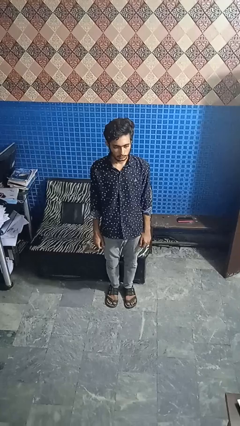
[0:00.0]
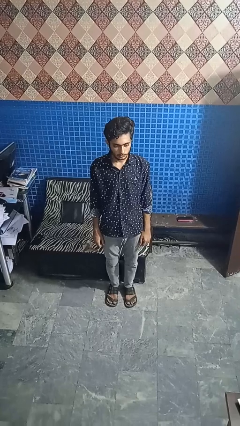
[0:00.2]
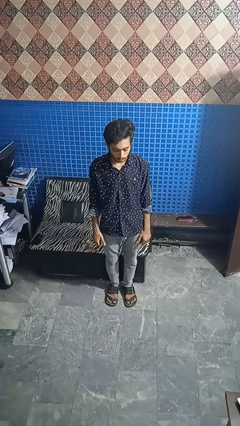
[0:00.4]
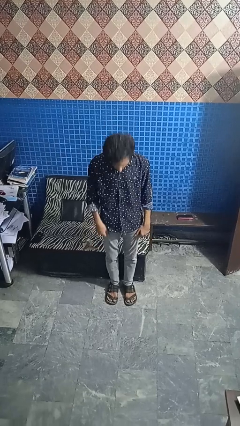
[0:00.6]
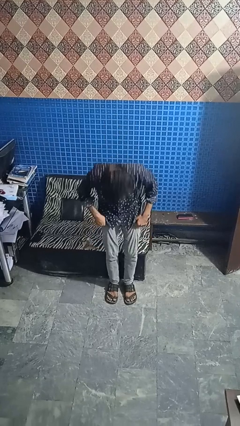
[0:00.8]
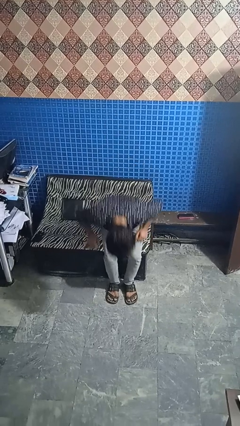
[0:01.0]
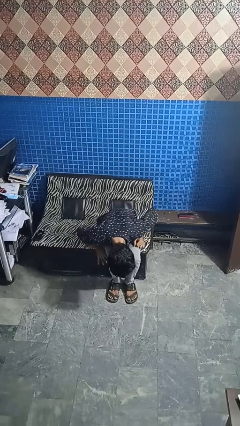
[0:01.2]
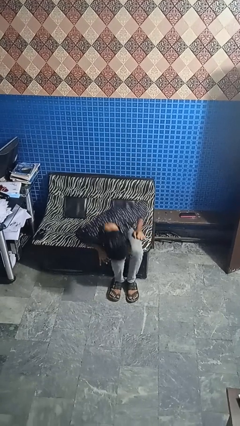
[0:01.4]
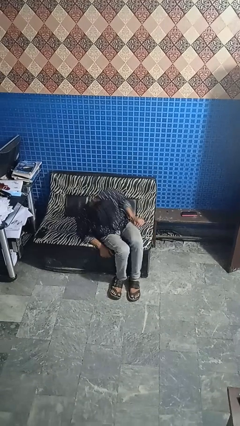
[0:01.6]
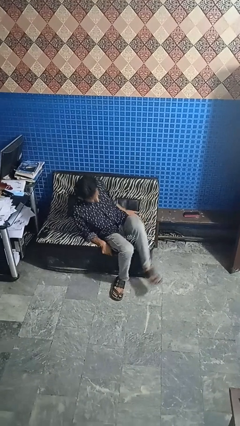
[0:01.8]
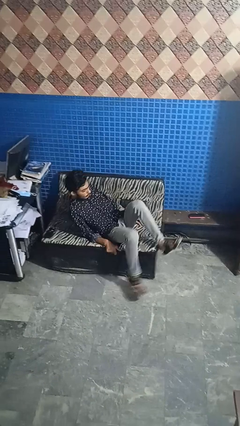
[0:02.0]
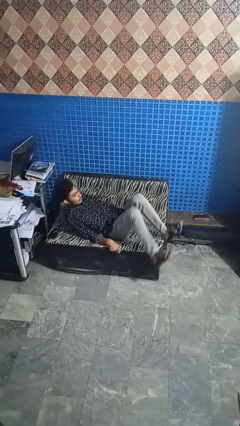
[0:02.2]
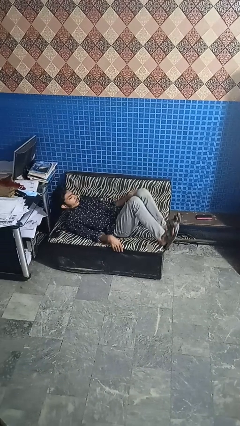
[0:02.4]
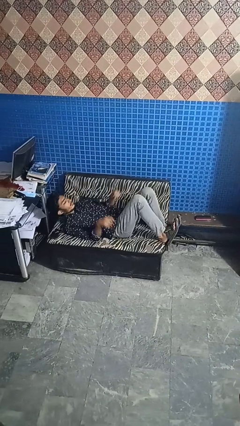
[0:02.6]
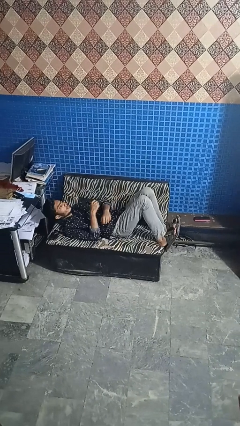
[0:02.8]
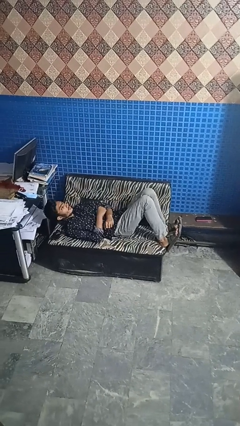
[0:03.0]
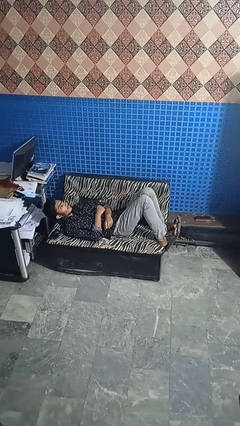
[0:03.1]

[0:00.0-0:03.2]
person lies down on couch

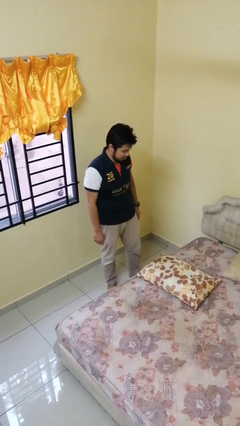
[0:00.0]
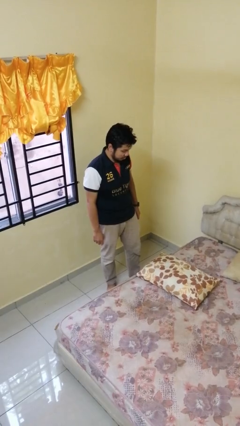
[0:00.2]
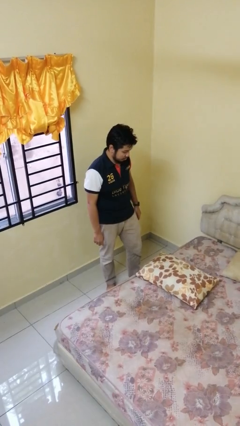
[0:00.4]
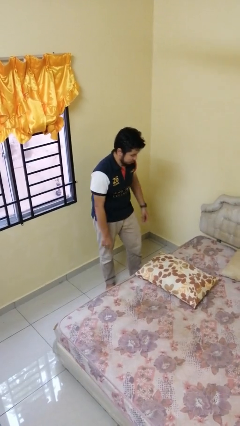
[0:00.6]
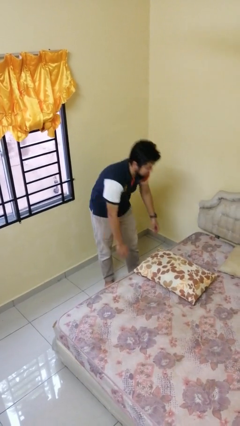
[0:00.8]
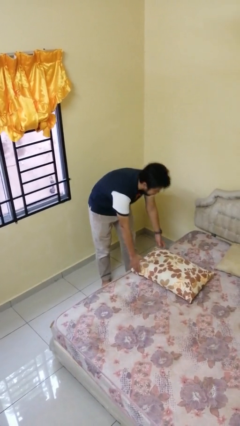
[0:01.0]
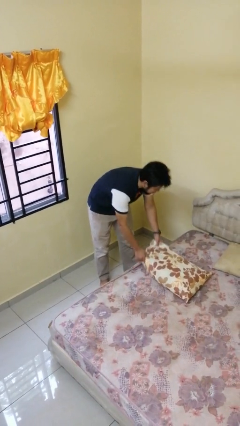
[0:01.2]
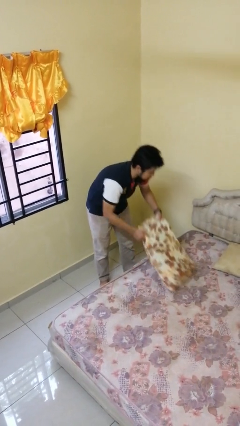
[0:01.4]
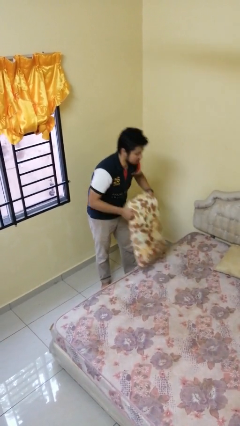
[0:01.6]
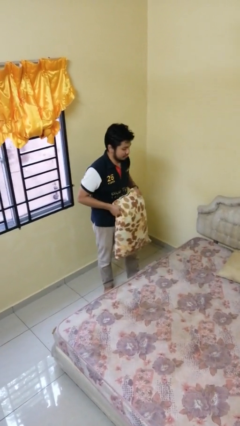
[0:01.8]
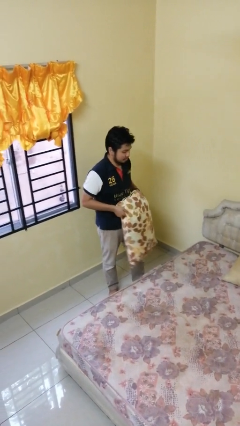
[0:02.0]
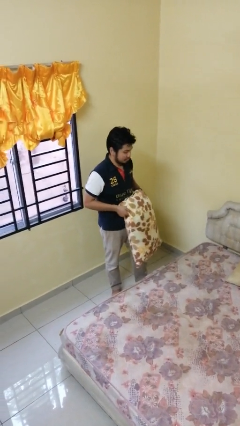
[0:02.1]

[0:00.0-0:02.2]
person picks up object from bed

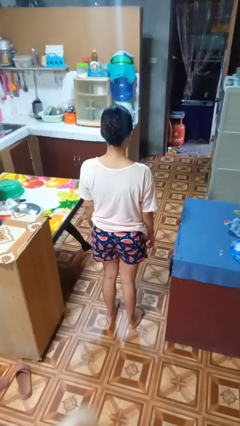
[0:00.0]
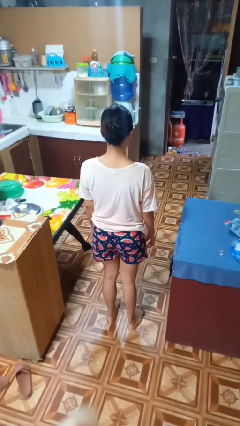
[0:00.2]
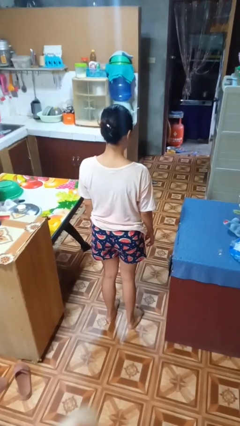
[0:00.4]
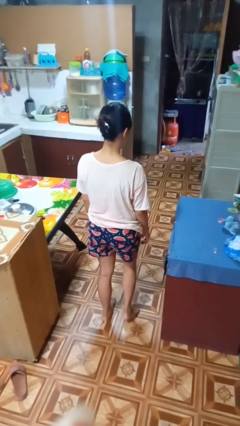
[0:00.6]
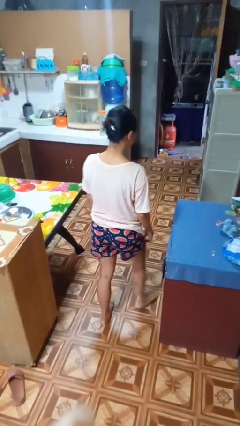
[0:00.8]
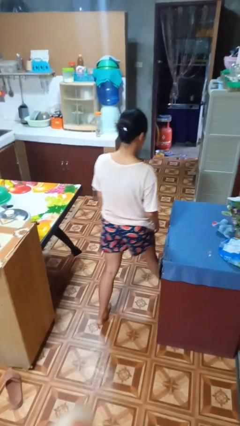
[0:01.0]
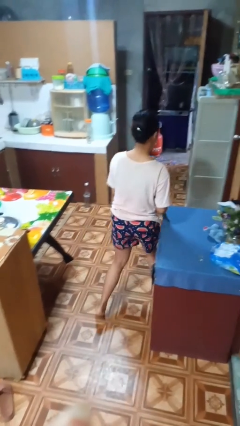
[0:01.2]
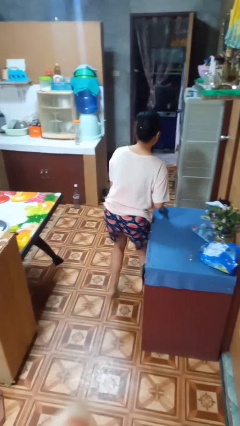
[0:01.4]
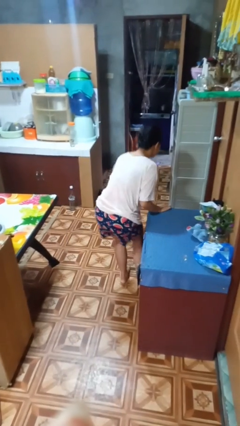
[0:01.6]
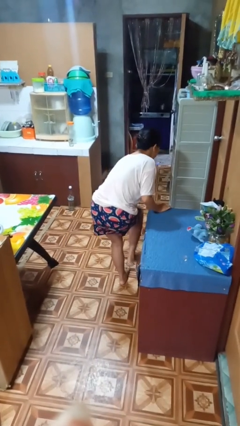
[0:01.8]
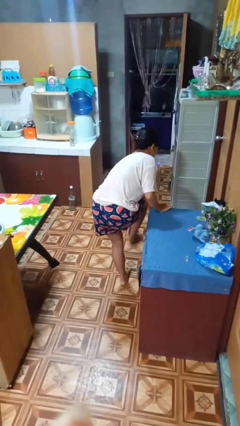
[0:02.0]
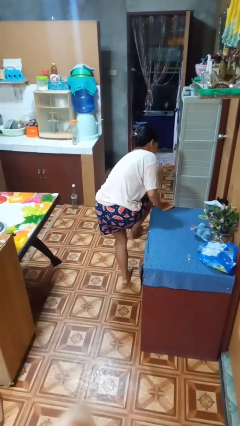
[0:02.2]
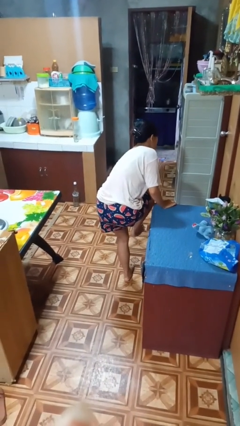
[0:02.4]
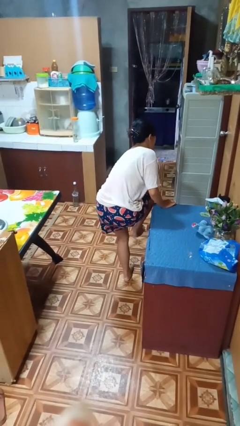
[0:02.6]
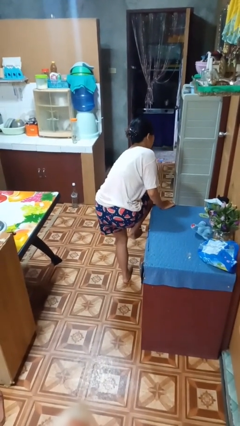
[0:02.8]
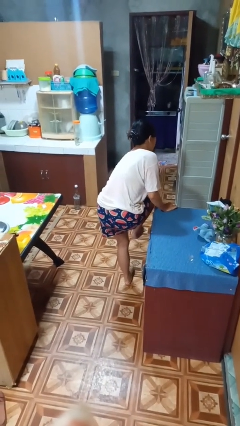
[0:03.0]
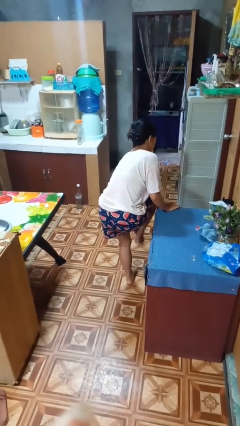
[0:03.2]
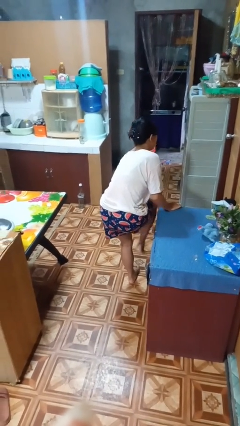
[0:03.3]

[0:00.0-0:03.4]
person stubs toe

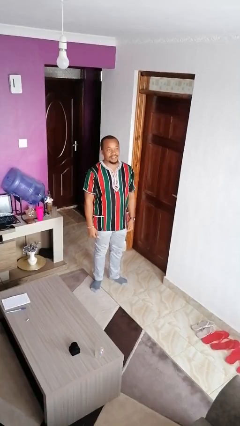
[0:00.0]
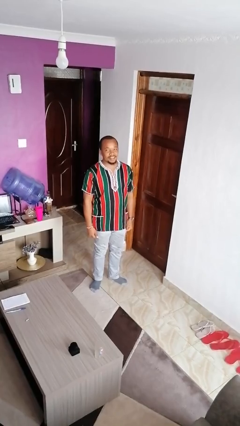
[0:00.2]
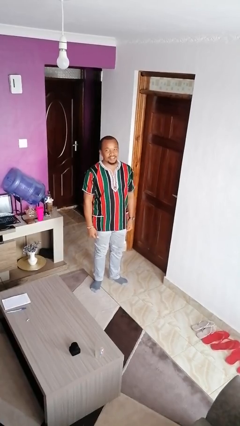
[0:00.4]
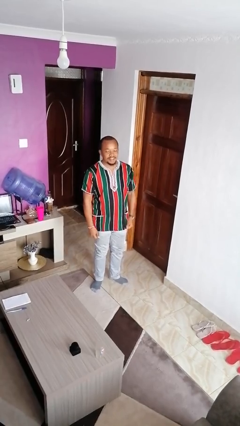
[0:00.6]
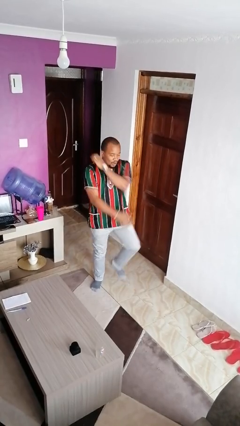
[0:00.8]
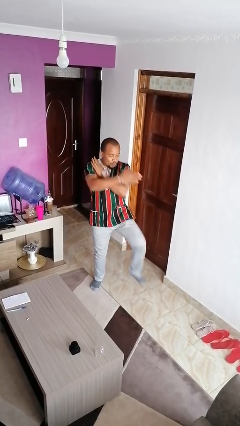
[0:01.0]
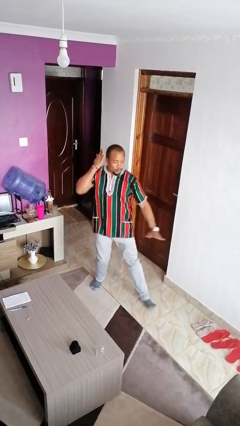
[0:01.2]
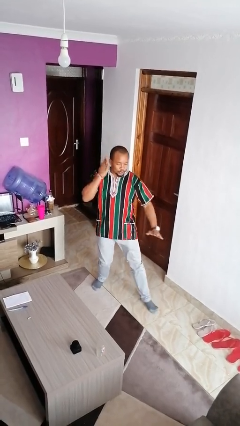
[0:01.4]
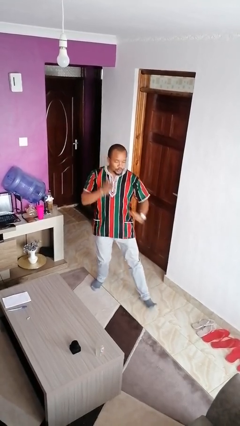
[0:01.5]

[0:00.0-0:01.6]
person karate chop

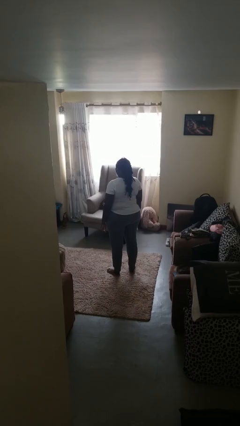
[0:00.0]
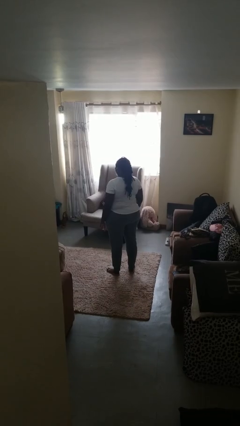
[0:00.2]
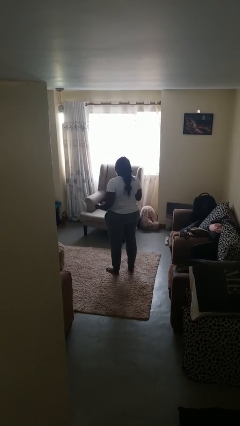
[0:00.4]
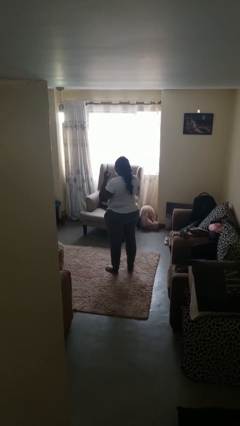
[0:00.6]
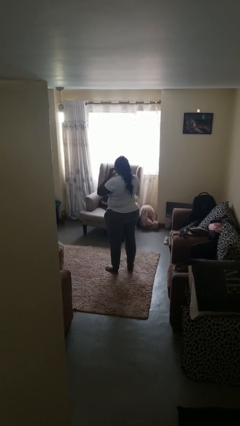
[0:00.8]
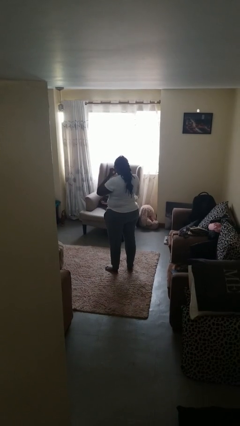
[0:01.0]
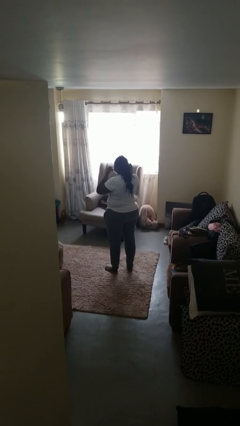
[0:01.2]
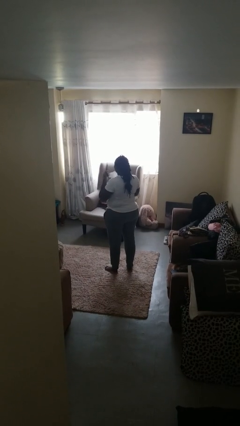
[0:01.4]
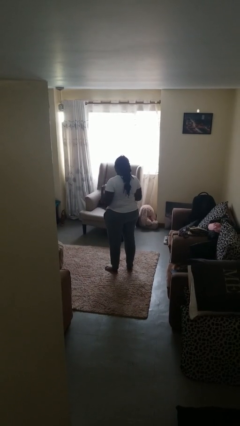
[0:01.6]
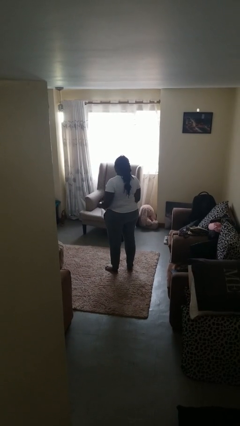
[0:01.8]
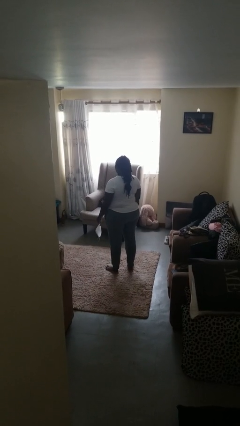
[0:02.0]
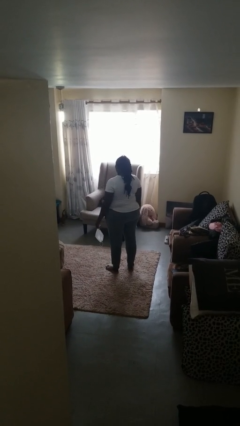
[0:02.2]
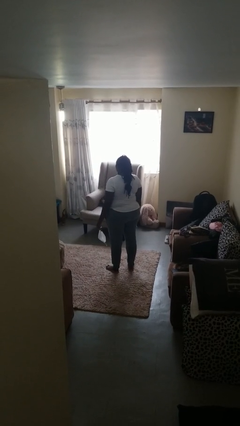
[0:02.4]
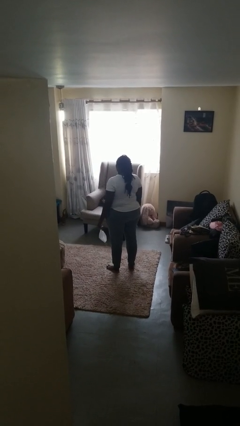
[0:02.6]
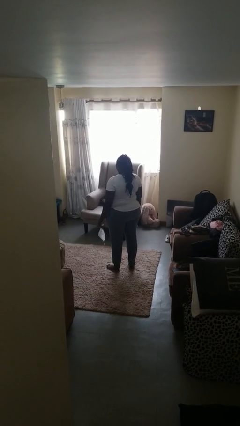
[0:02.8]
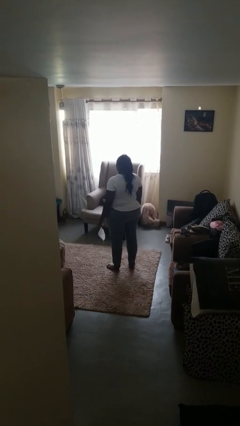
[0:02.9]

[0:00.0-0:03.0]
person takes off facemask

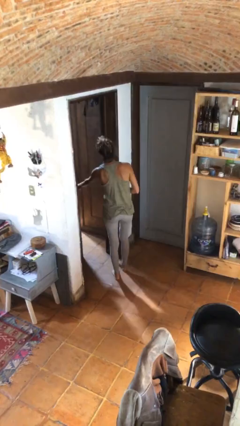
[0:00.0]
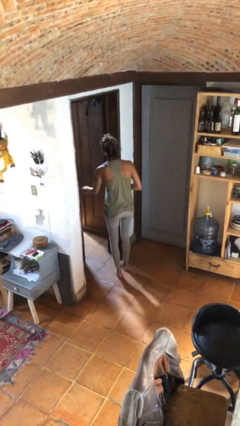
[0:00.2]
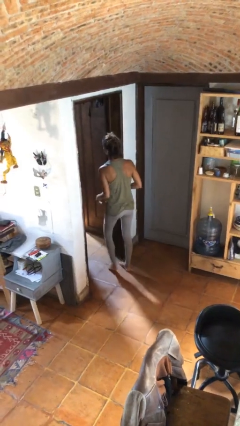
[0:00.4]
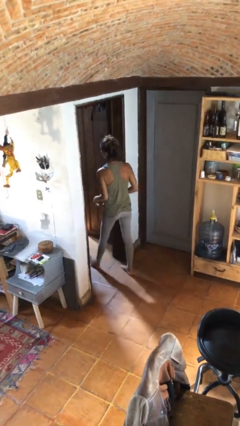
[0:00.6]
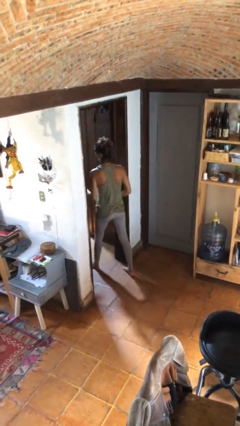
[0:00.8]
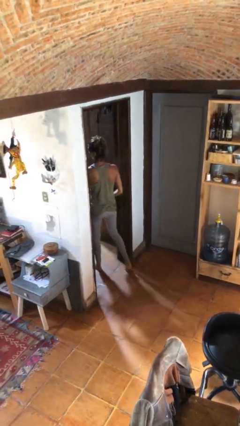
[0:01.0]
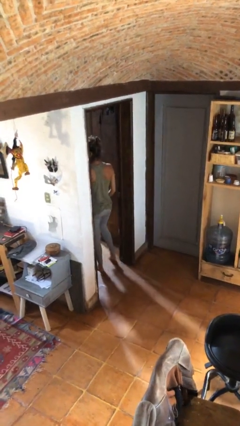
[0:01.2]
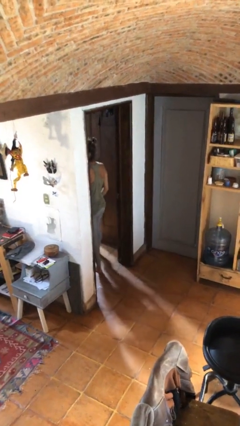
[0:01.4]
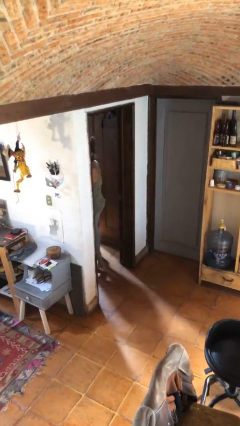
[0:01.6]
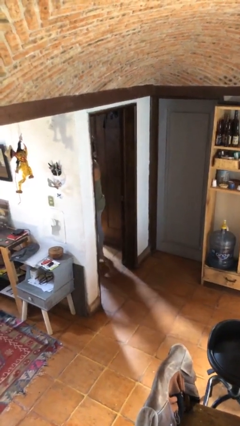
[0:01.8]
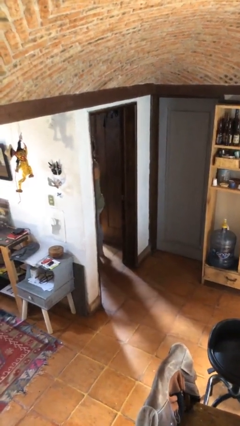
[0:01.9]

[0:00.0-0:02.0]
person exits scene through structure

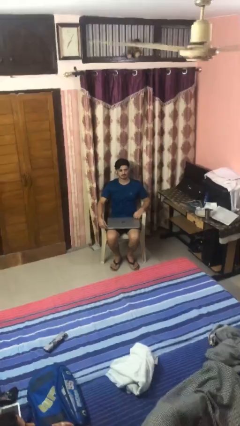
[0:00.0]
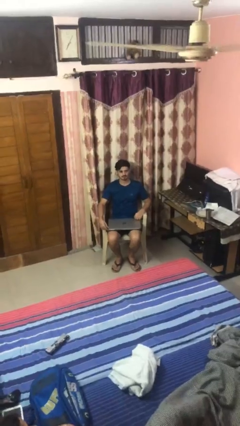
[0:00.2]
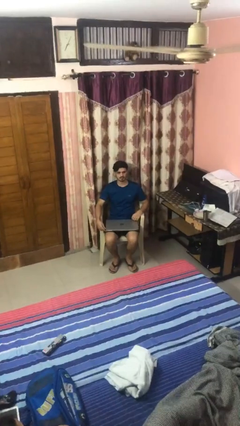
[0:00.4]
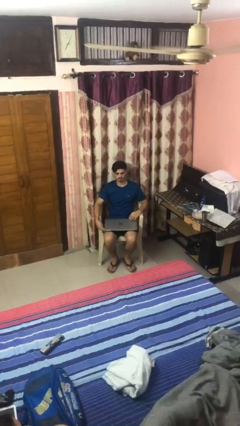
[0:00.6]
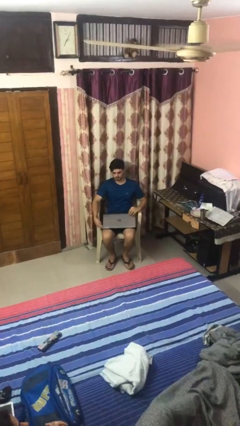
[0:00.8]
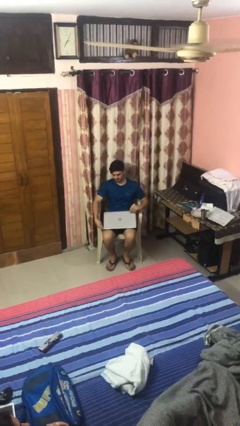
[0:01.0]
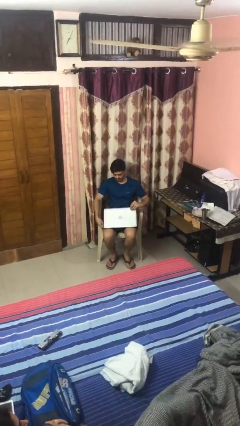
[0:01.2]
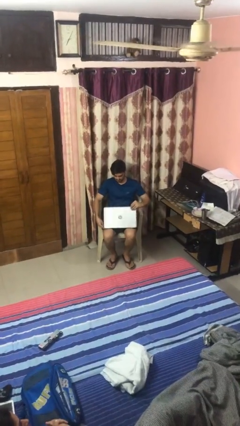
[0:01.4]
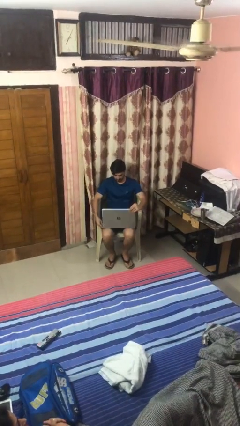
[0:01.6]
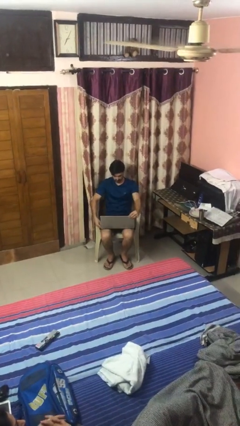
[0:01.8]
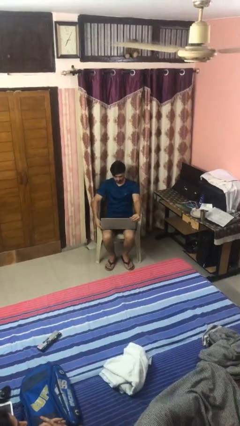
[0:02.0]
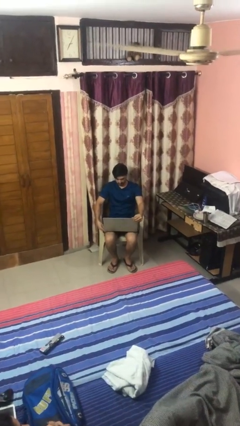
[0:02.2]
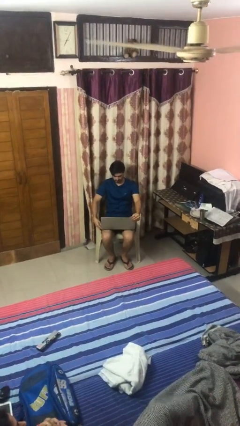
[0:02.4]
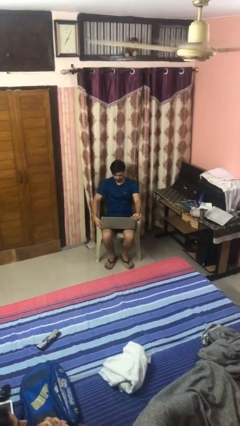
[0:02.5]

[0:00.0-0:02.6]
person opens laptop
